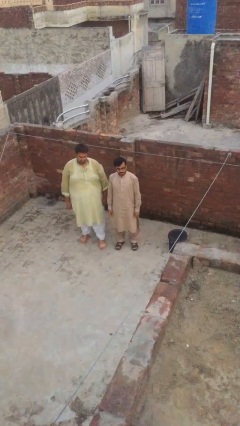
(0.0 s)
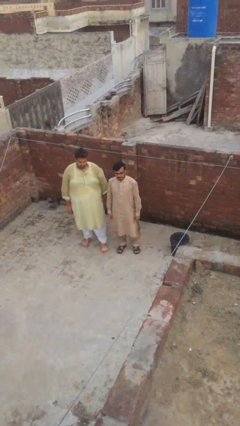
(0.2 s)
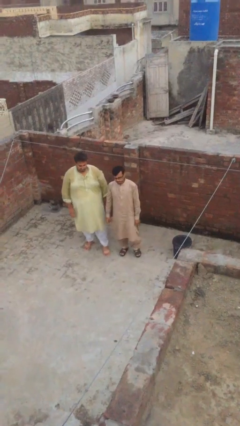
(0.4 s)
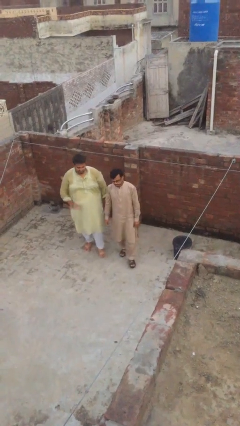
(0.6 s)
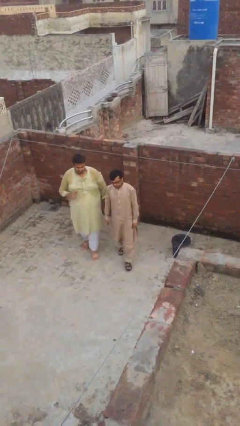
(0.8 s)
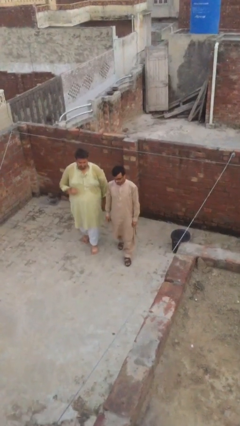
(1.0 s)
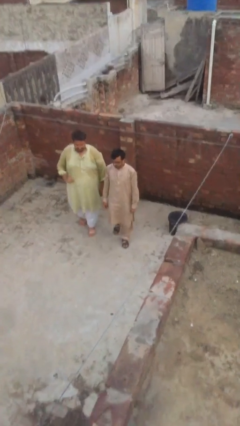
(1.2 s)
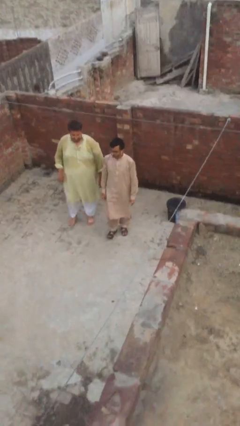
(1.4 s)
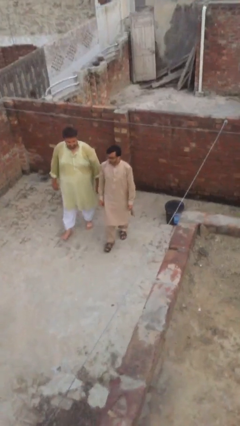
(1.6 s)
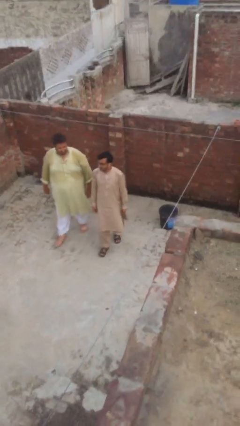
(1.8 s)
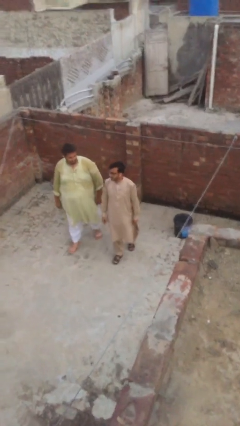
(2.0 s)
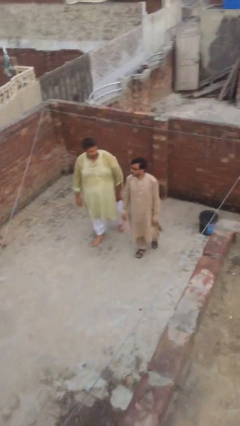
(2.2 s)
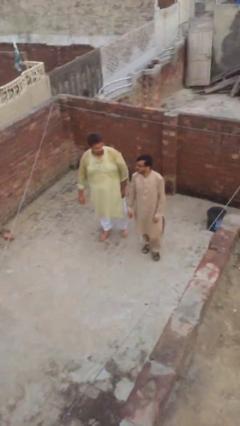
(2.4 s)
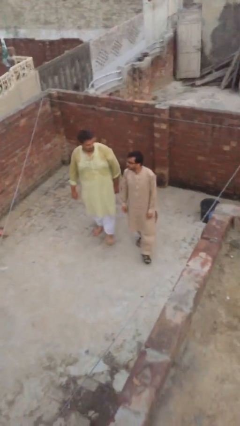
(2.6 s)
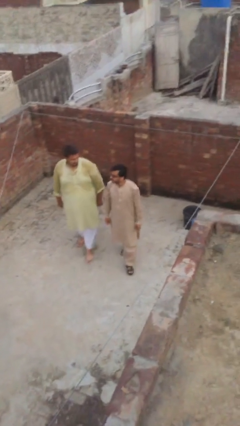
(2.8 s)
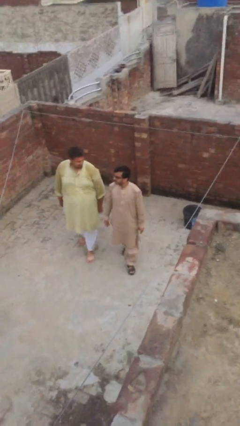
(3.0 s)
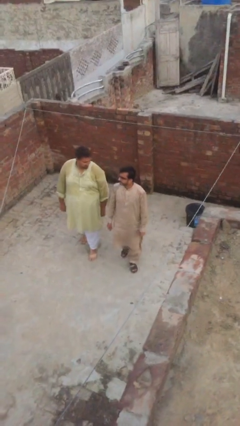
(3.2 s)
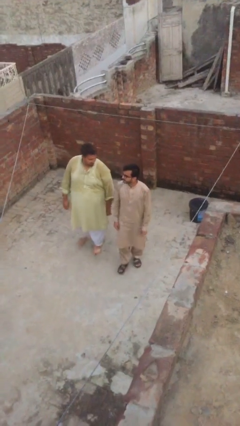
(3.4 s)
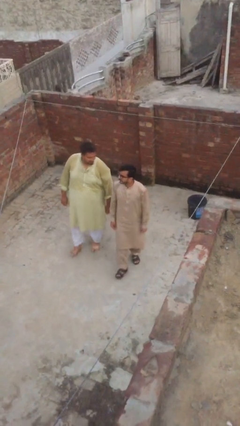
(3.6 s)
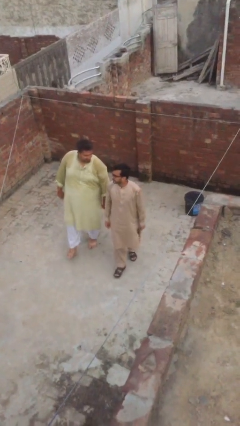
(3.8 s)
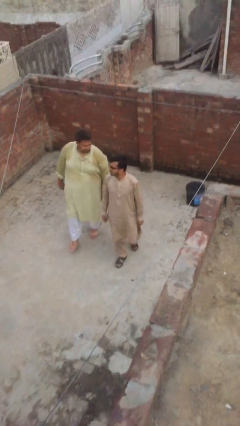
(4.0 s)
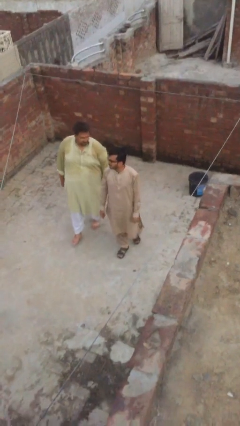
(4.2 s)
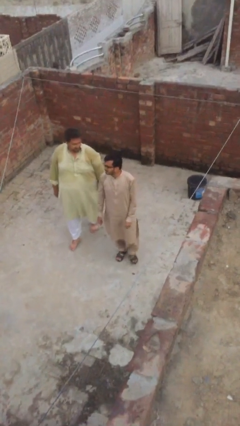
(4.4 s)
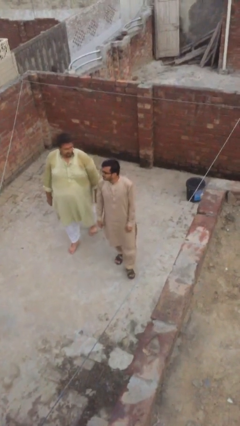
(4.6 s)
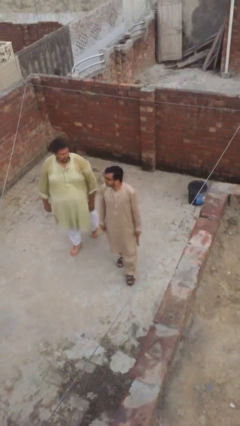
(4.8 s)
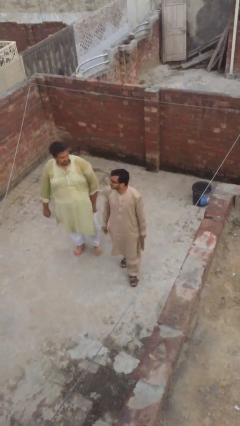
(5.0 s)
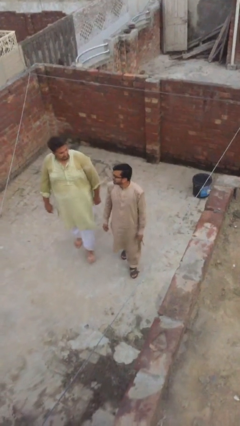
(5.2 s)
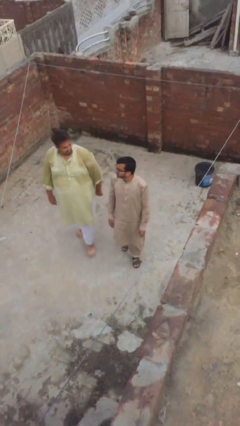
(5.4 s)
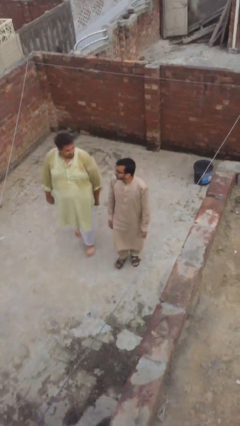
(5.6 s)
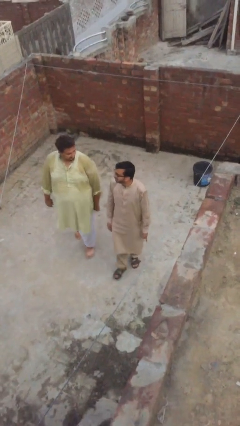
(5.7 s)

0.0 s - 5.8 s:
person talks to person

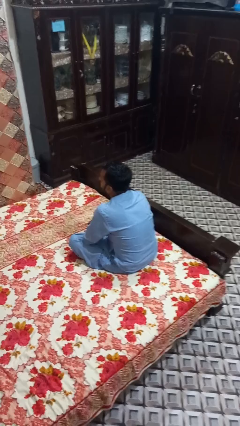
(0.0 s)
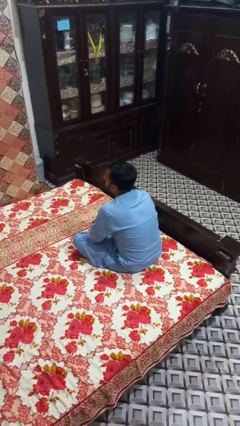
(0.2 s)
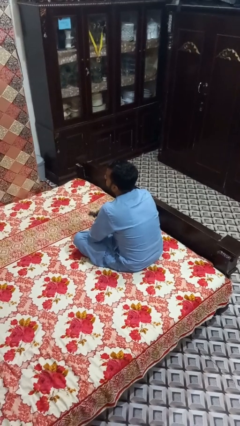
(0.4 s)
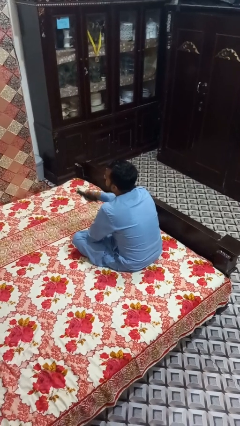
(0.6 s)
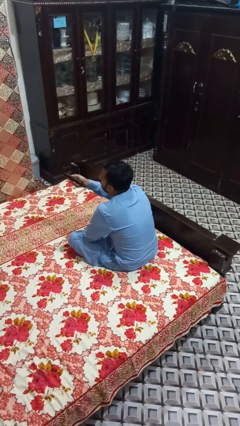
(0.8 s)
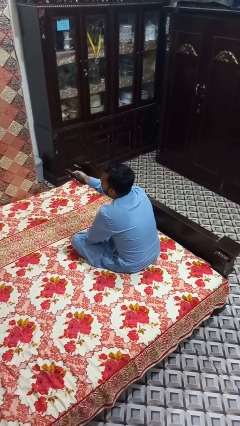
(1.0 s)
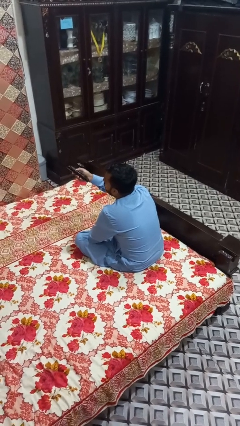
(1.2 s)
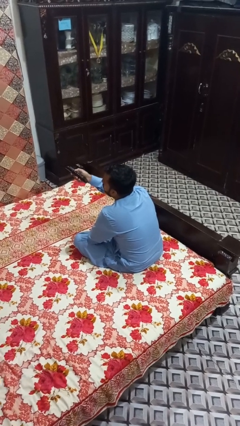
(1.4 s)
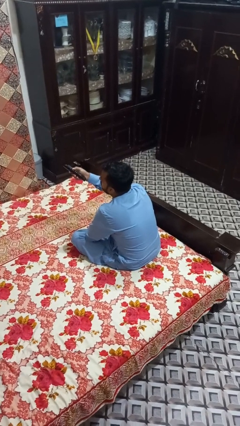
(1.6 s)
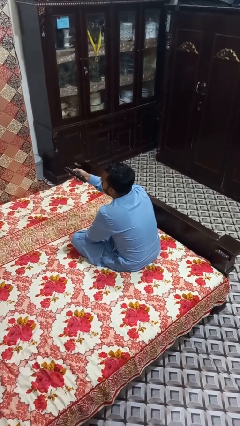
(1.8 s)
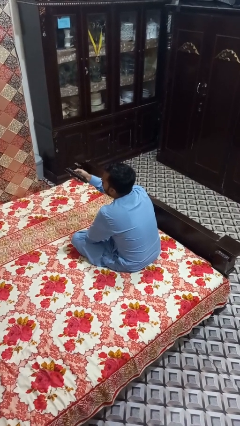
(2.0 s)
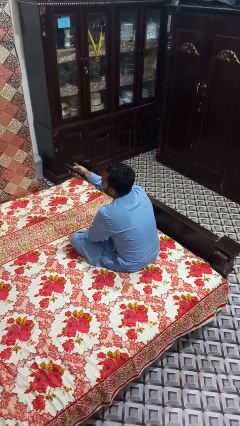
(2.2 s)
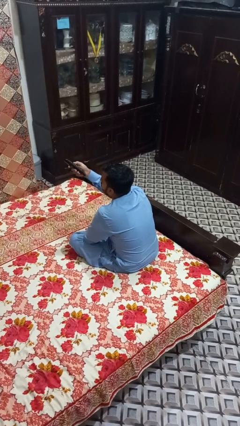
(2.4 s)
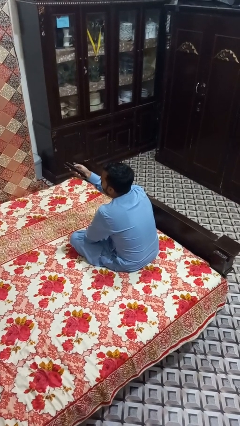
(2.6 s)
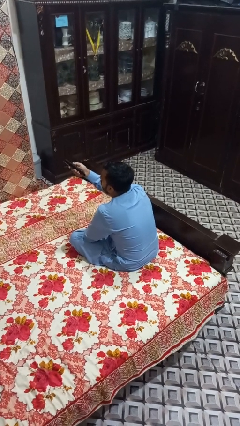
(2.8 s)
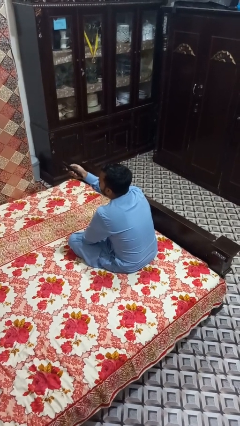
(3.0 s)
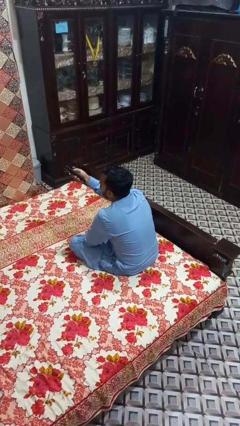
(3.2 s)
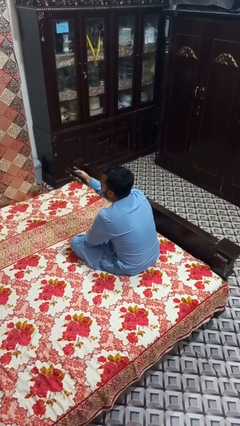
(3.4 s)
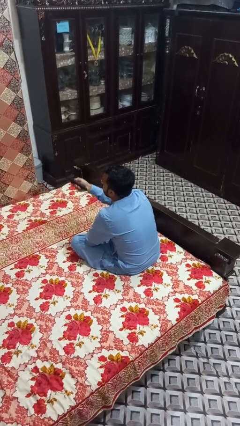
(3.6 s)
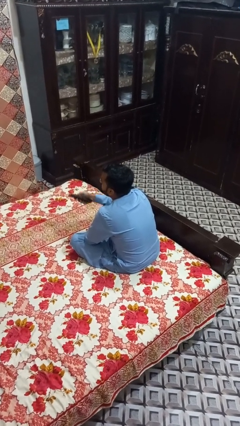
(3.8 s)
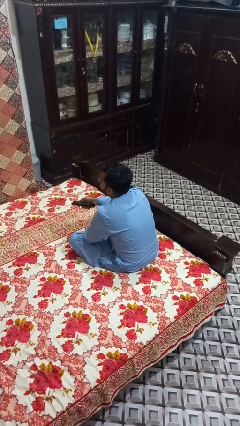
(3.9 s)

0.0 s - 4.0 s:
person uses television remote

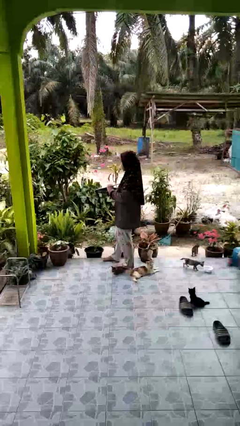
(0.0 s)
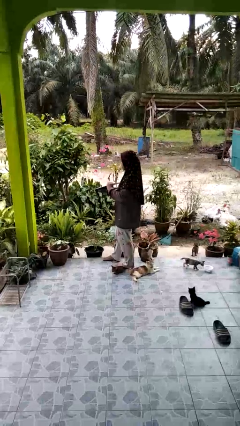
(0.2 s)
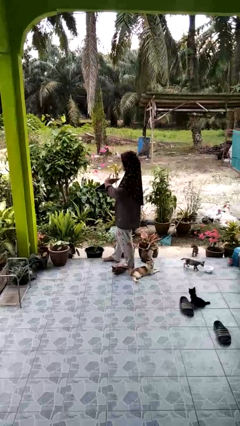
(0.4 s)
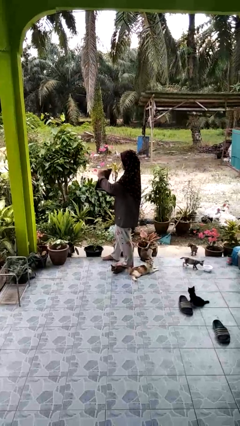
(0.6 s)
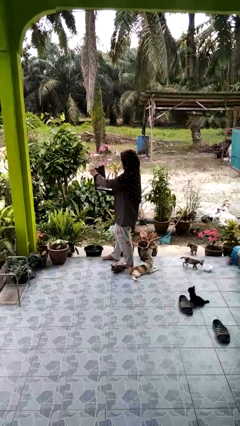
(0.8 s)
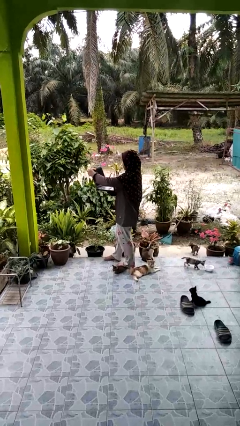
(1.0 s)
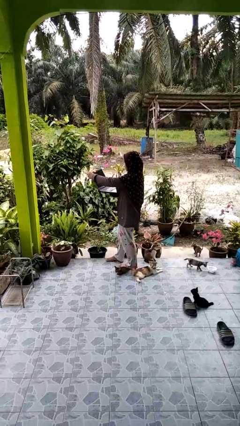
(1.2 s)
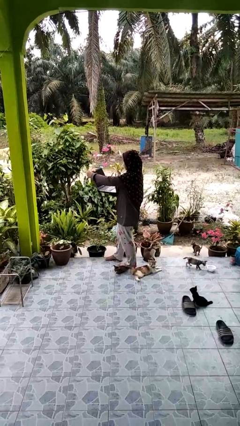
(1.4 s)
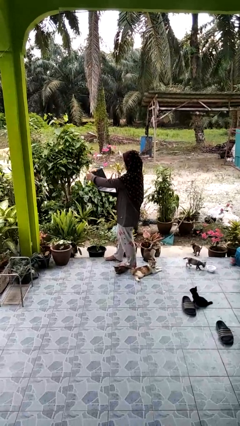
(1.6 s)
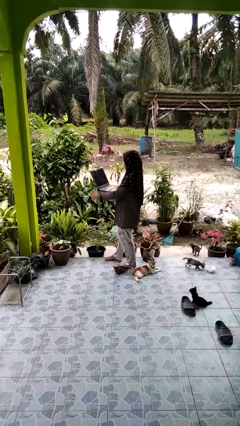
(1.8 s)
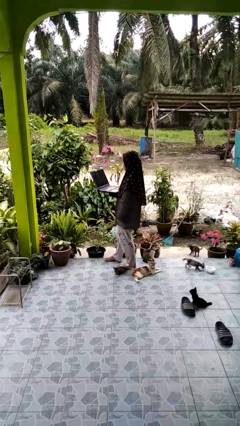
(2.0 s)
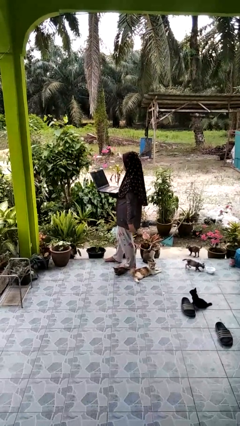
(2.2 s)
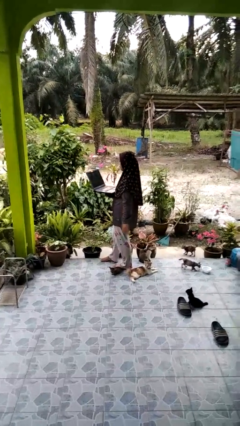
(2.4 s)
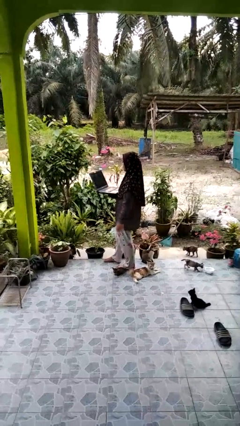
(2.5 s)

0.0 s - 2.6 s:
person opens laptop

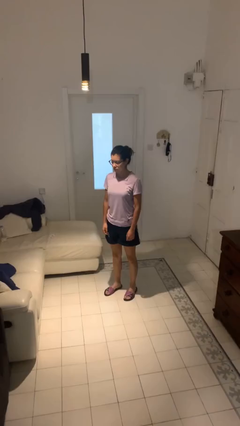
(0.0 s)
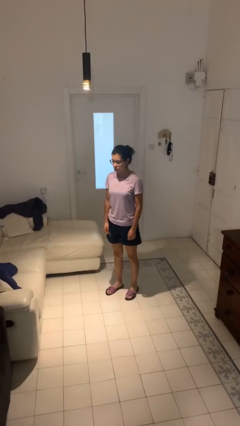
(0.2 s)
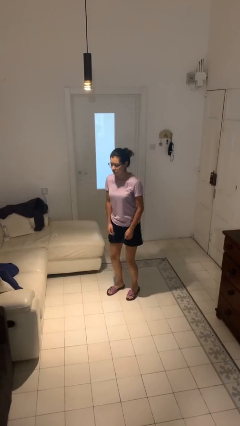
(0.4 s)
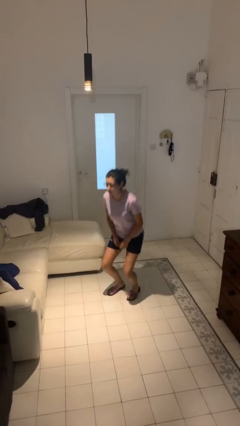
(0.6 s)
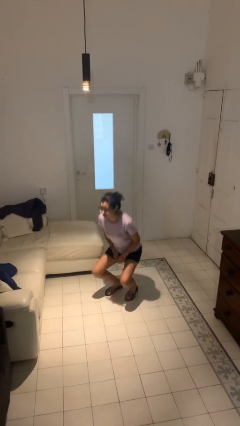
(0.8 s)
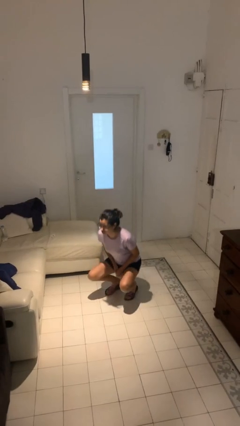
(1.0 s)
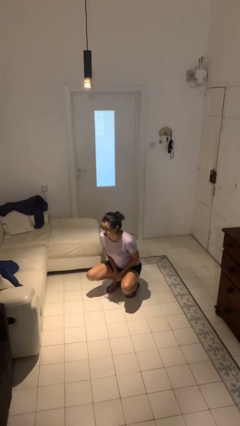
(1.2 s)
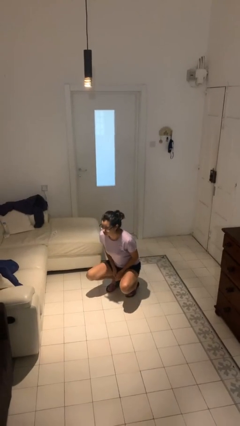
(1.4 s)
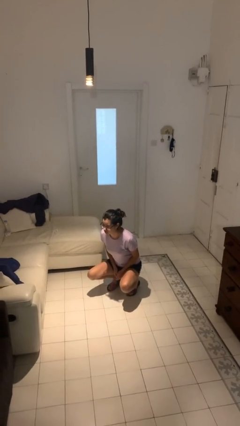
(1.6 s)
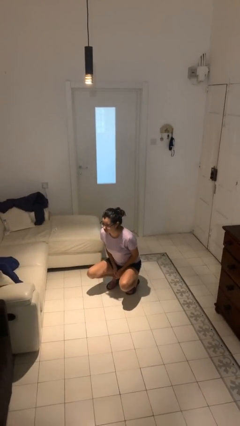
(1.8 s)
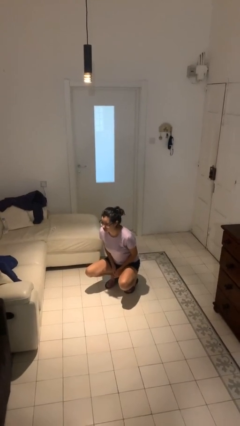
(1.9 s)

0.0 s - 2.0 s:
person squats

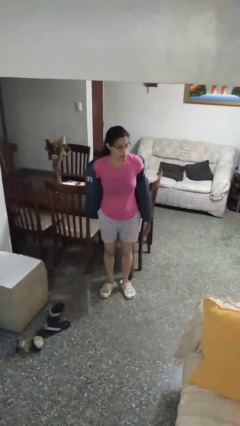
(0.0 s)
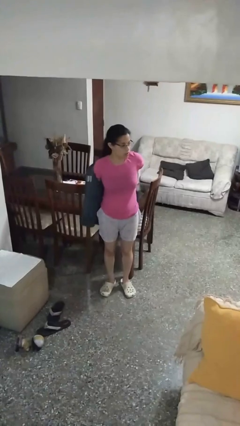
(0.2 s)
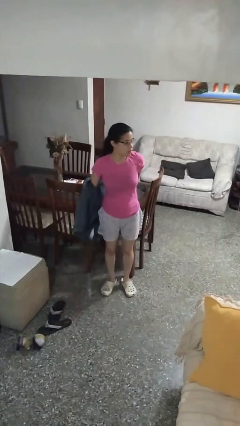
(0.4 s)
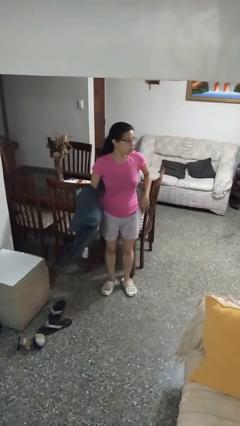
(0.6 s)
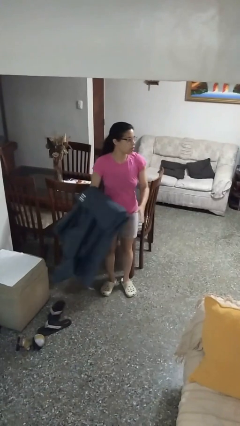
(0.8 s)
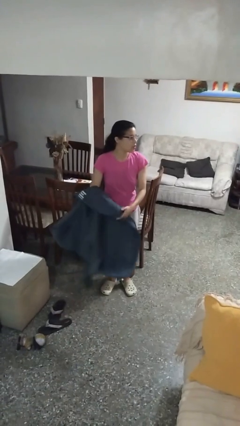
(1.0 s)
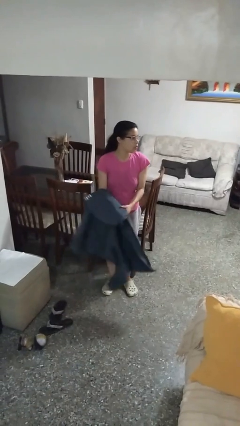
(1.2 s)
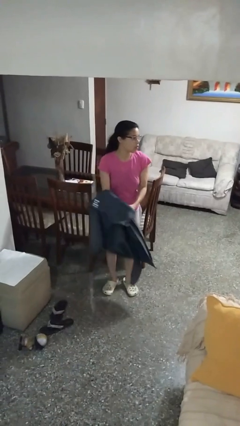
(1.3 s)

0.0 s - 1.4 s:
person takes off jacket

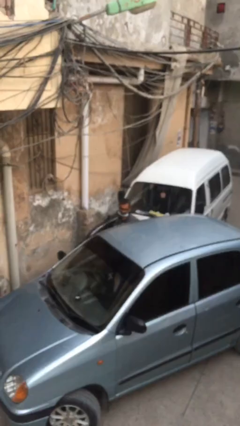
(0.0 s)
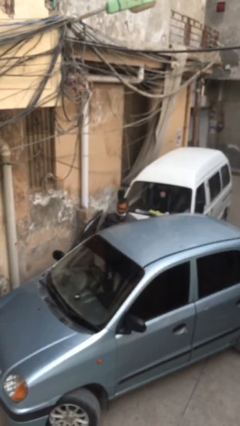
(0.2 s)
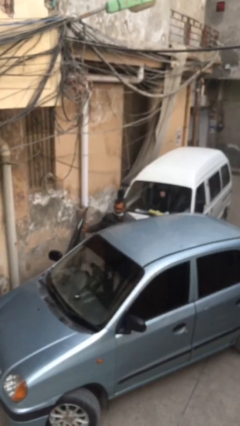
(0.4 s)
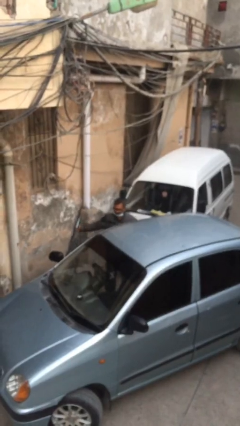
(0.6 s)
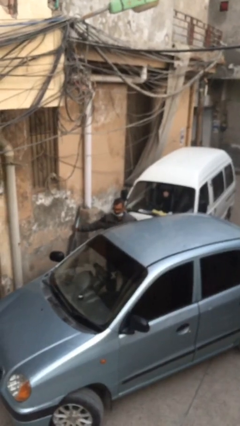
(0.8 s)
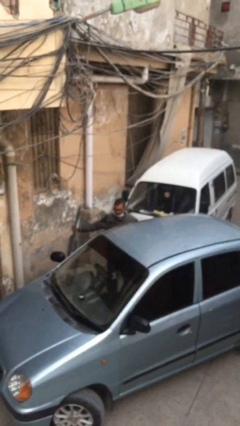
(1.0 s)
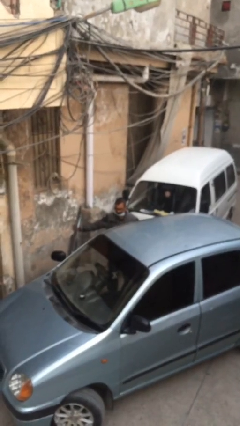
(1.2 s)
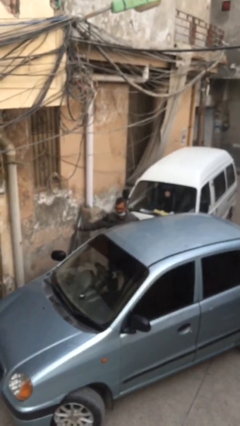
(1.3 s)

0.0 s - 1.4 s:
person opens car door

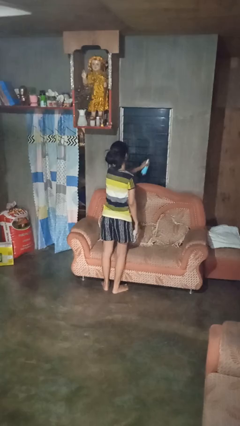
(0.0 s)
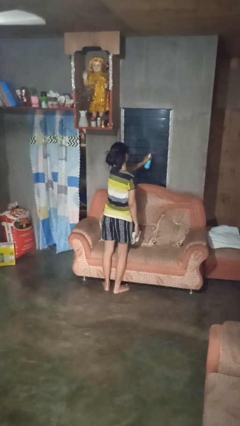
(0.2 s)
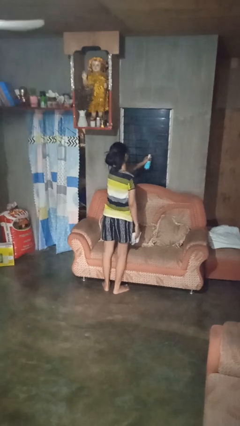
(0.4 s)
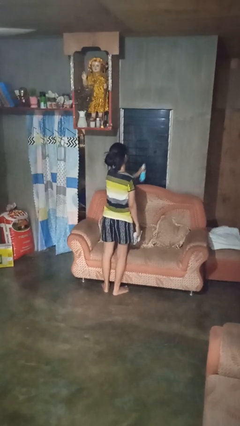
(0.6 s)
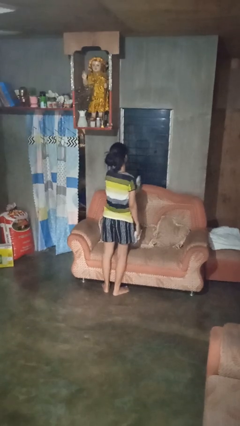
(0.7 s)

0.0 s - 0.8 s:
person sprays from bottle
